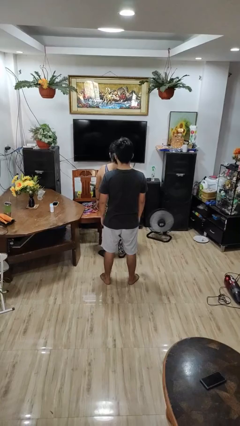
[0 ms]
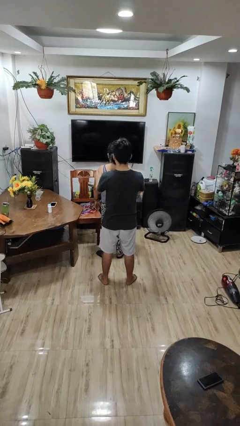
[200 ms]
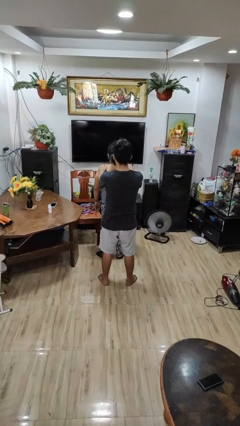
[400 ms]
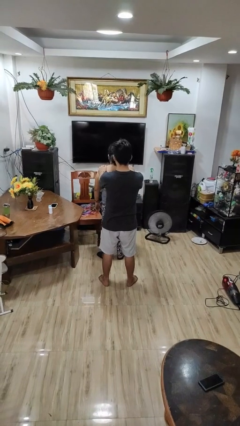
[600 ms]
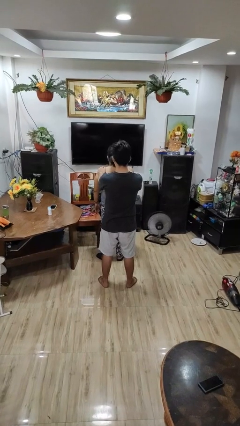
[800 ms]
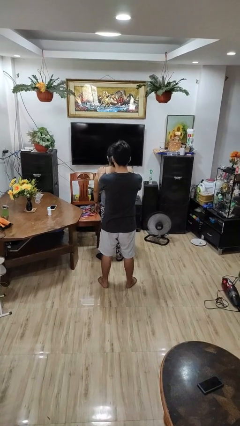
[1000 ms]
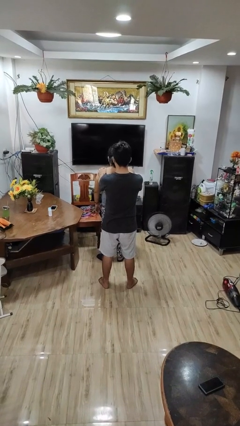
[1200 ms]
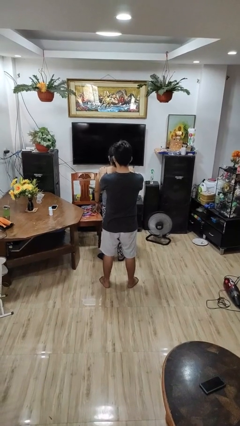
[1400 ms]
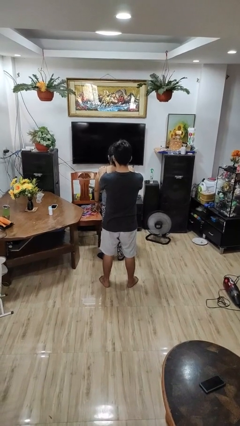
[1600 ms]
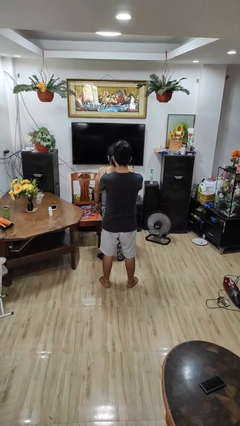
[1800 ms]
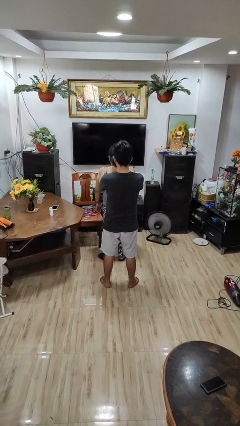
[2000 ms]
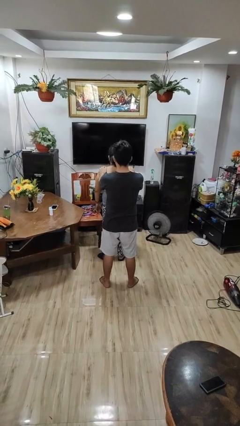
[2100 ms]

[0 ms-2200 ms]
person grabs person by shoulder

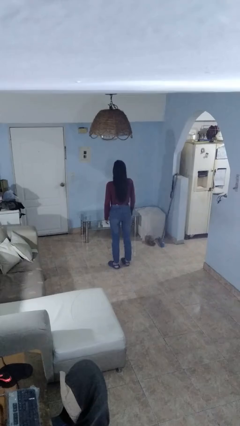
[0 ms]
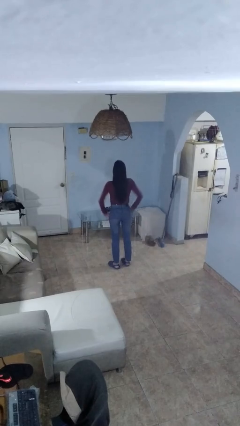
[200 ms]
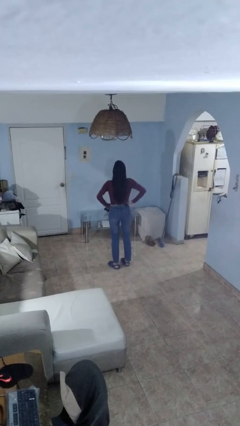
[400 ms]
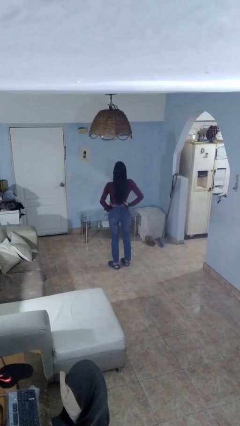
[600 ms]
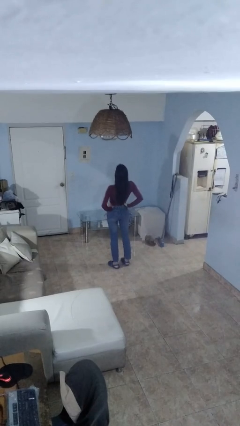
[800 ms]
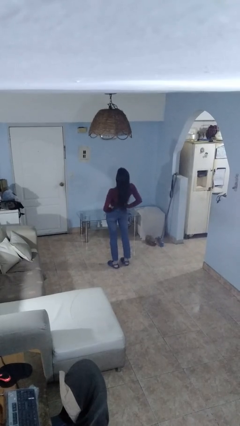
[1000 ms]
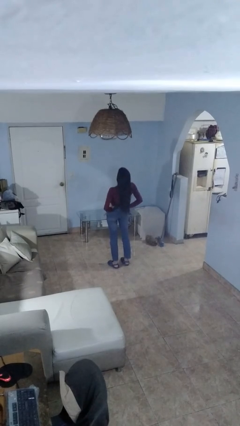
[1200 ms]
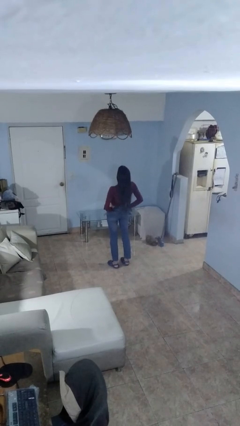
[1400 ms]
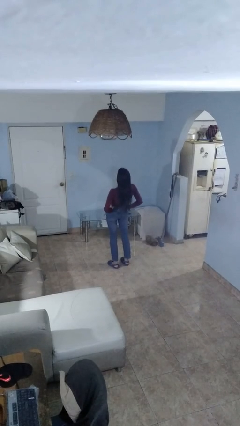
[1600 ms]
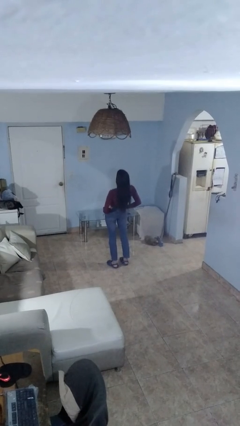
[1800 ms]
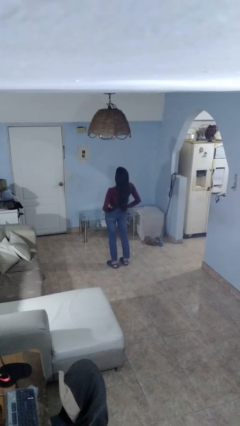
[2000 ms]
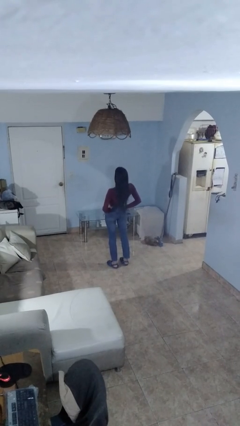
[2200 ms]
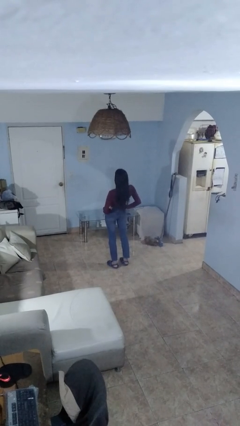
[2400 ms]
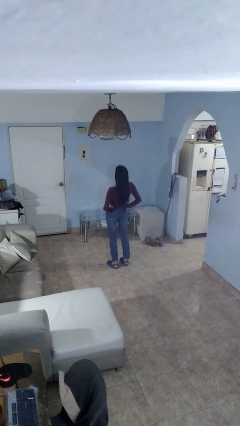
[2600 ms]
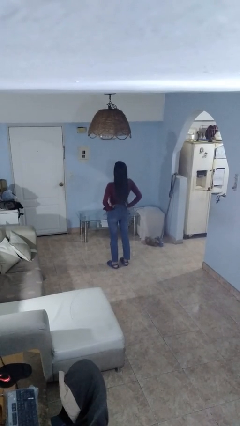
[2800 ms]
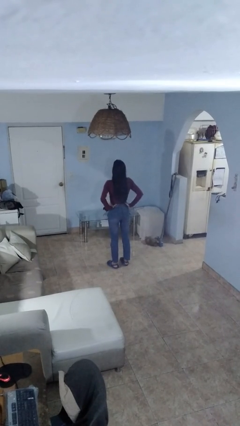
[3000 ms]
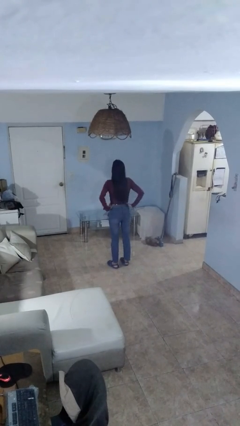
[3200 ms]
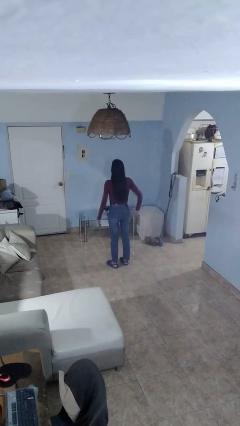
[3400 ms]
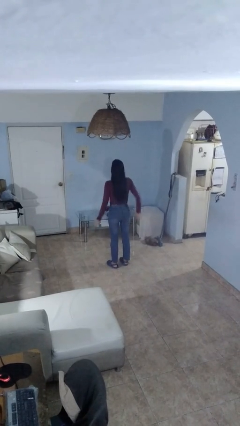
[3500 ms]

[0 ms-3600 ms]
person stretches back

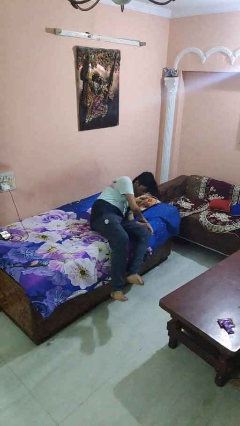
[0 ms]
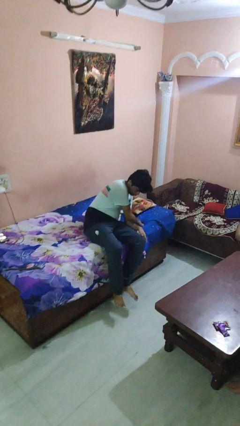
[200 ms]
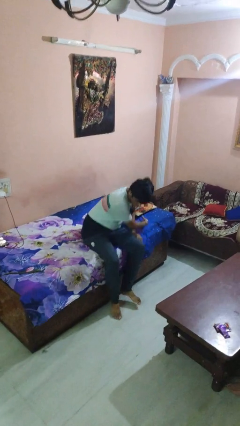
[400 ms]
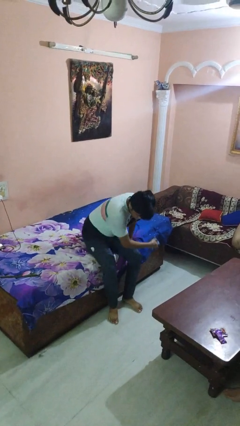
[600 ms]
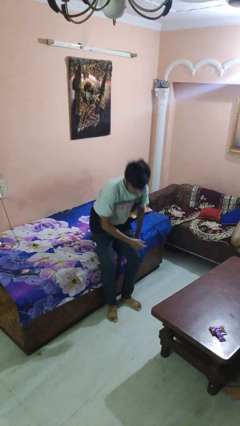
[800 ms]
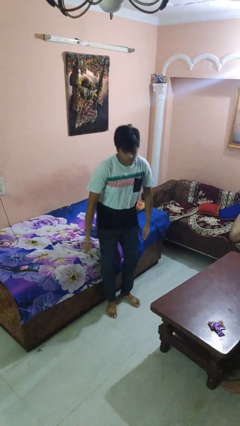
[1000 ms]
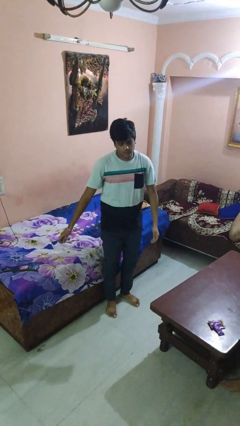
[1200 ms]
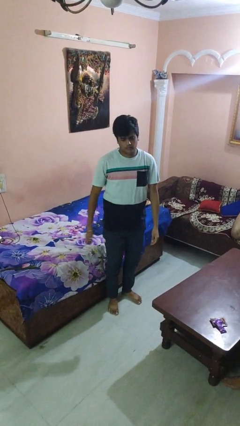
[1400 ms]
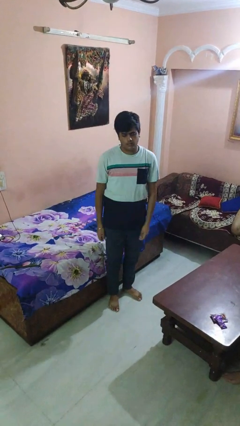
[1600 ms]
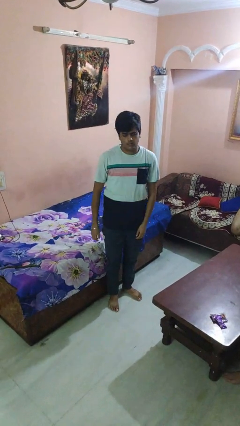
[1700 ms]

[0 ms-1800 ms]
person stands up

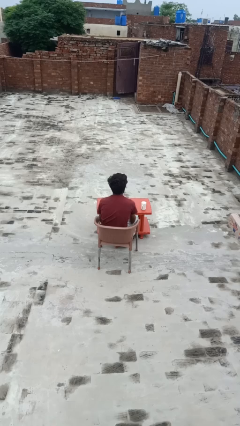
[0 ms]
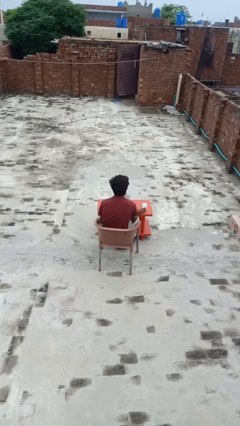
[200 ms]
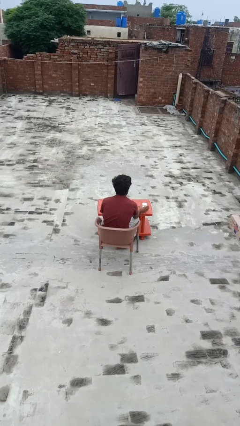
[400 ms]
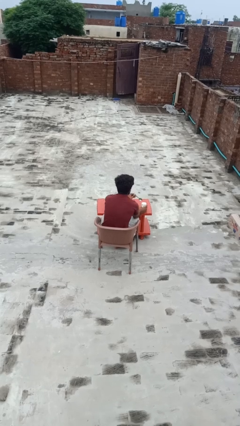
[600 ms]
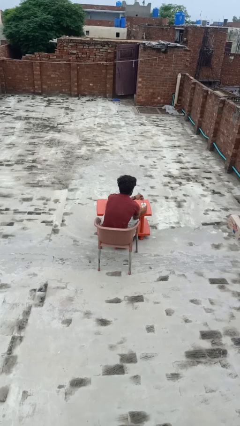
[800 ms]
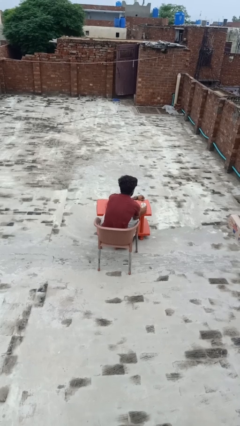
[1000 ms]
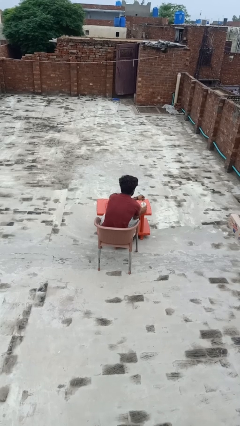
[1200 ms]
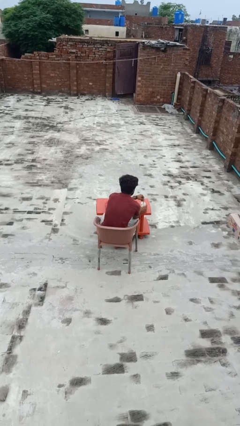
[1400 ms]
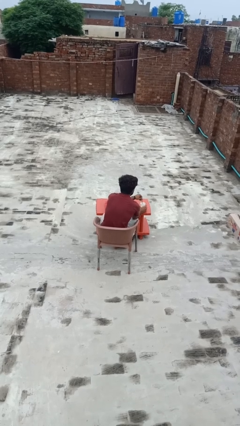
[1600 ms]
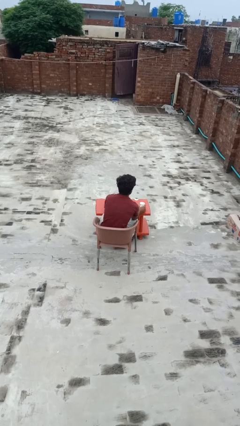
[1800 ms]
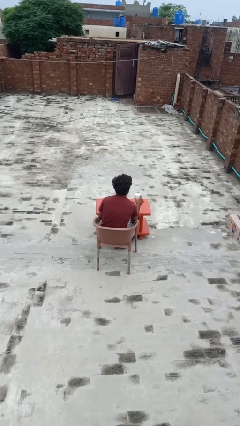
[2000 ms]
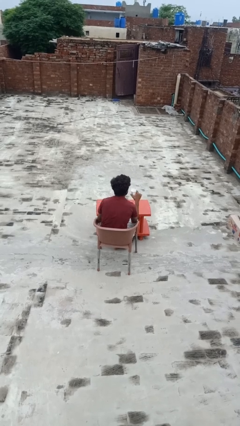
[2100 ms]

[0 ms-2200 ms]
person stirs mug

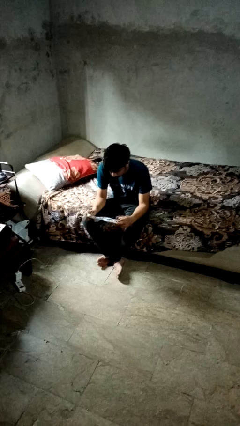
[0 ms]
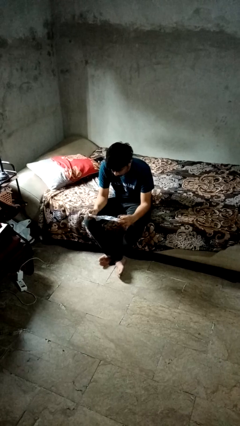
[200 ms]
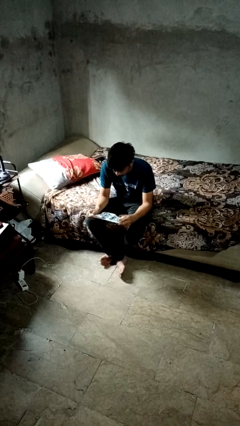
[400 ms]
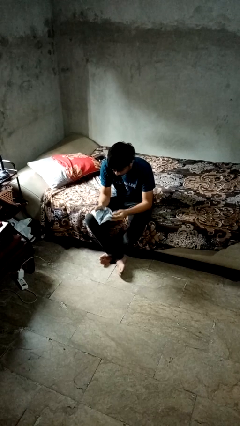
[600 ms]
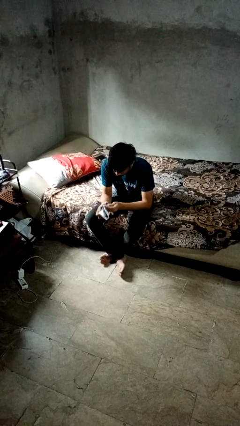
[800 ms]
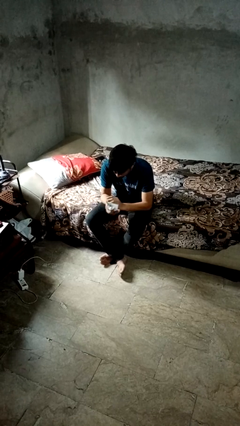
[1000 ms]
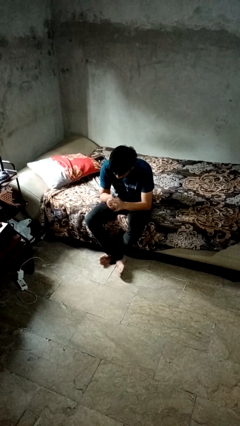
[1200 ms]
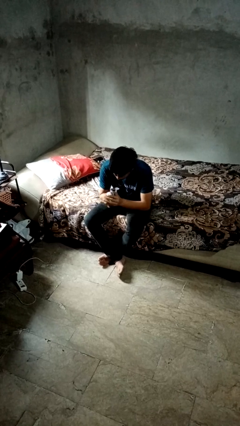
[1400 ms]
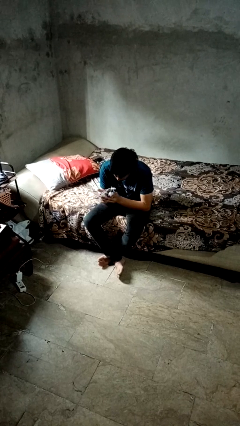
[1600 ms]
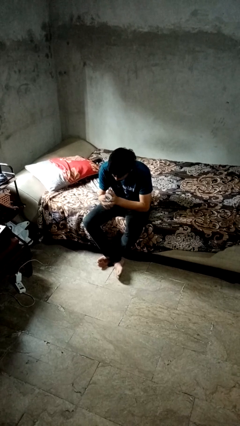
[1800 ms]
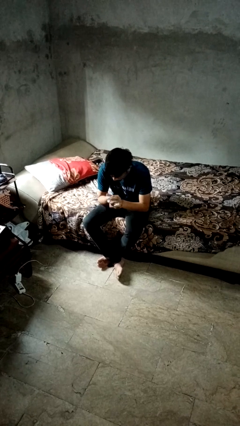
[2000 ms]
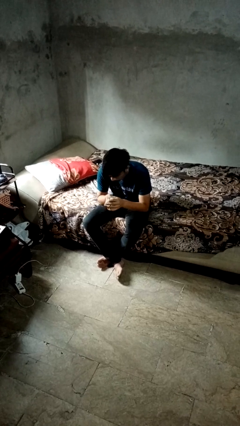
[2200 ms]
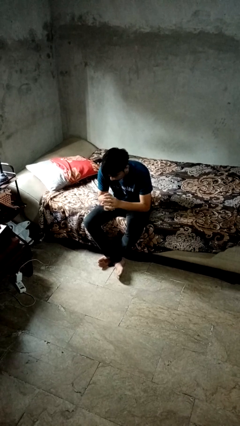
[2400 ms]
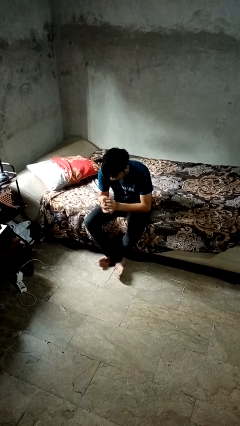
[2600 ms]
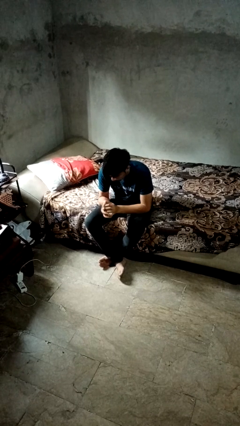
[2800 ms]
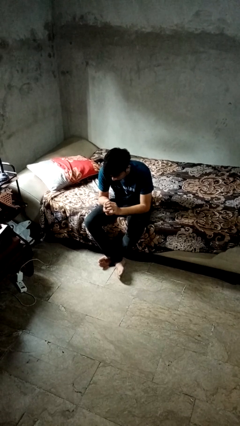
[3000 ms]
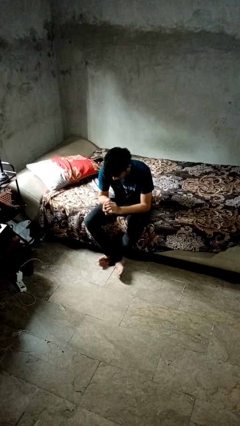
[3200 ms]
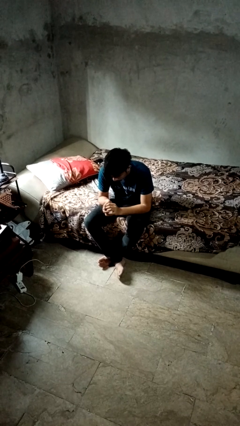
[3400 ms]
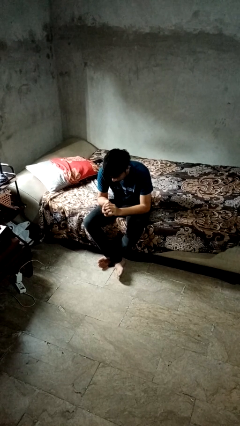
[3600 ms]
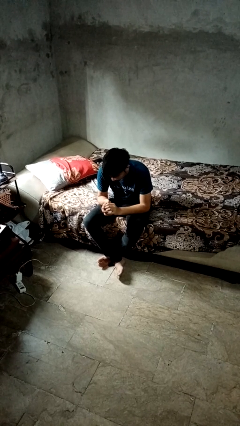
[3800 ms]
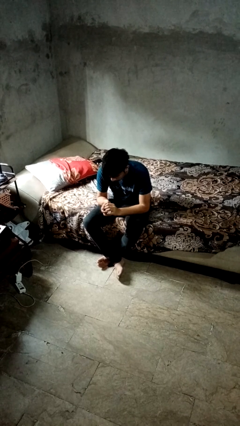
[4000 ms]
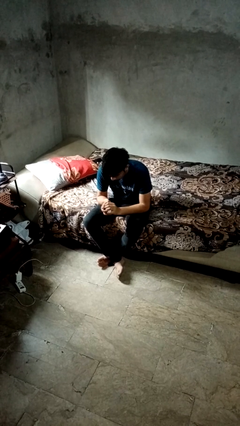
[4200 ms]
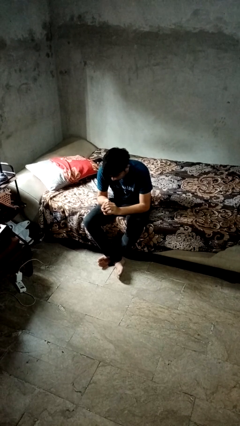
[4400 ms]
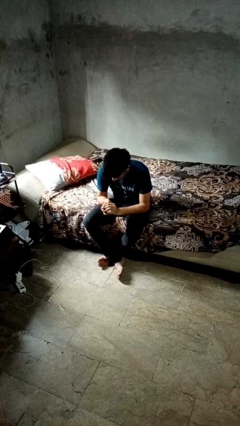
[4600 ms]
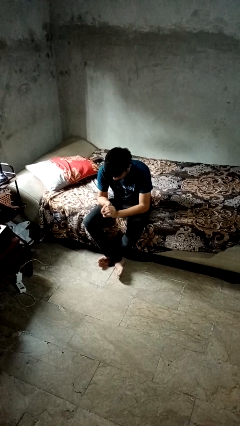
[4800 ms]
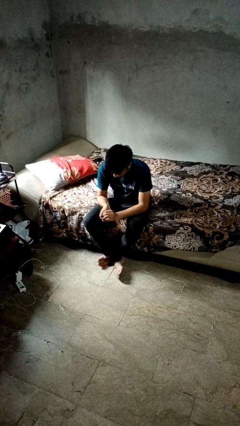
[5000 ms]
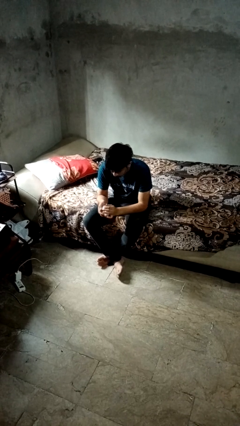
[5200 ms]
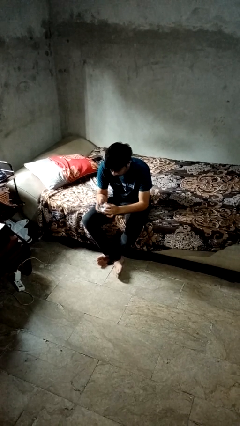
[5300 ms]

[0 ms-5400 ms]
person crumples paper

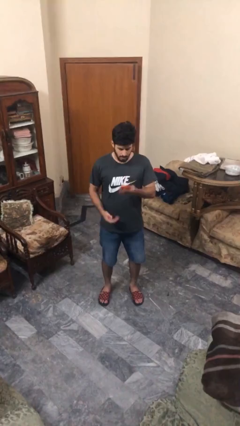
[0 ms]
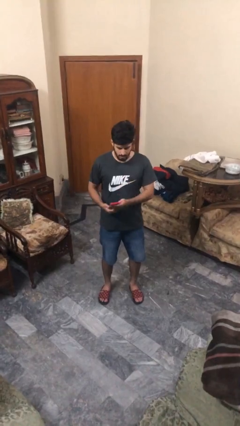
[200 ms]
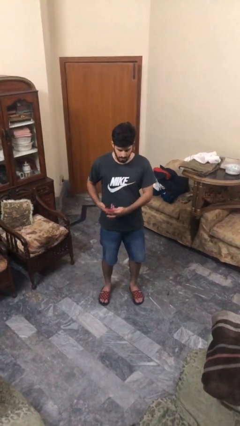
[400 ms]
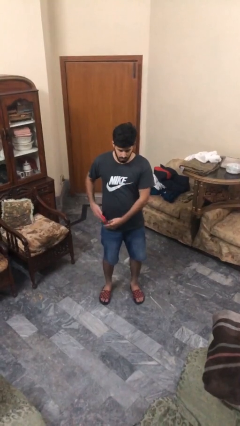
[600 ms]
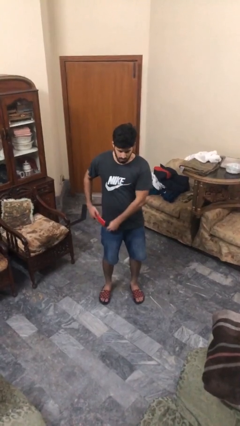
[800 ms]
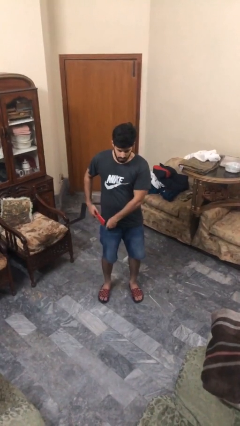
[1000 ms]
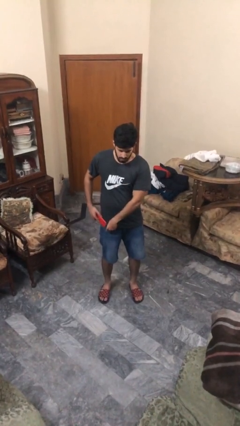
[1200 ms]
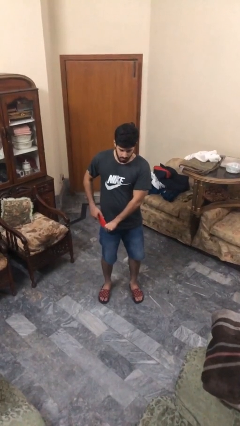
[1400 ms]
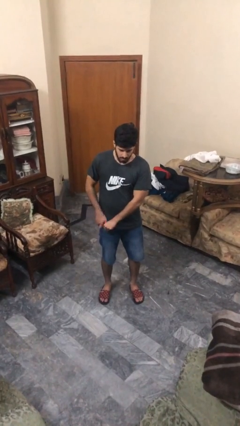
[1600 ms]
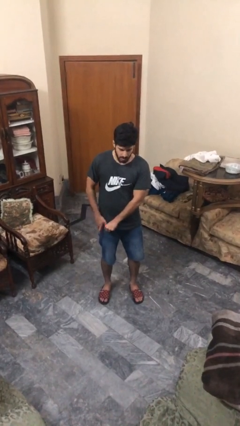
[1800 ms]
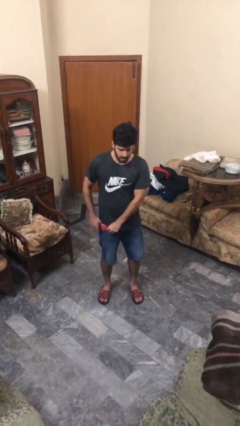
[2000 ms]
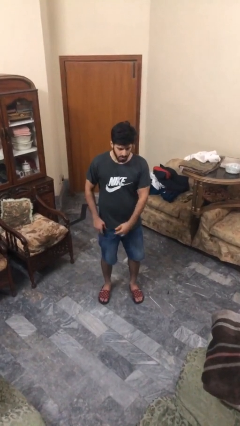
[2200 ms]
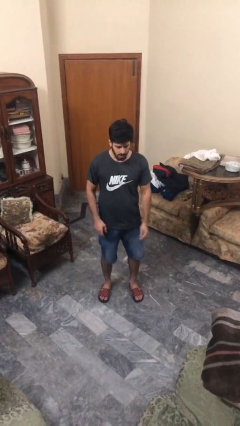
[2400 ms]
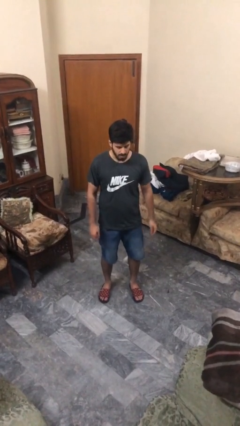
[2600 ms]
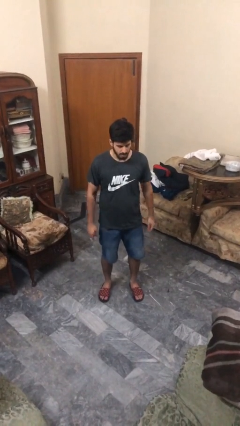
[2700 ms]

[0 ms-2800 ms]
person puts phone into pocket
